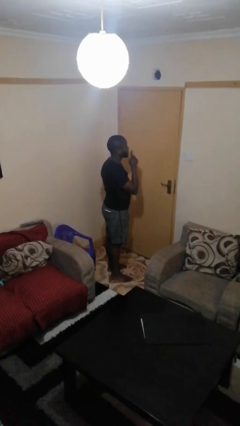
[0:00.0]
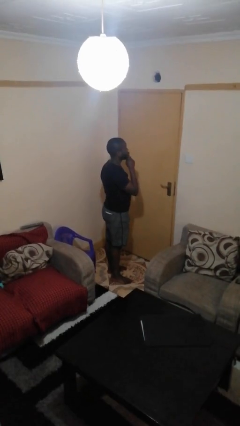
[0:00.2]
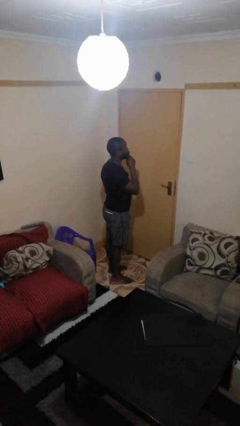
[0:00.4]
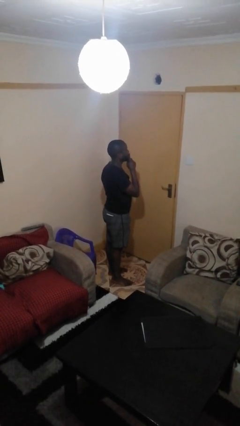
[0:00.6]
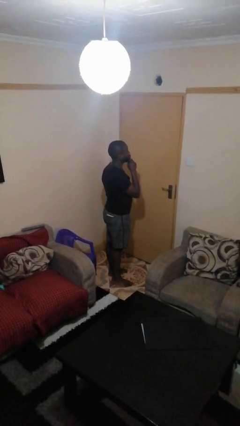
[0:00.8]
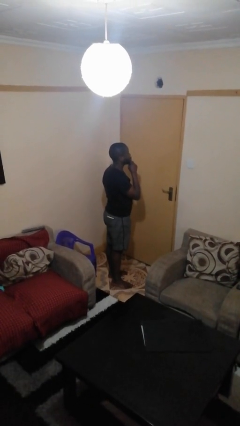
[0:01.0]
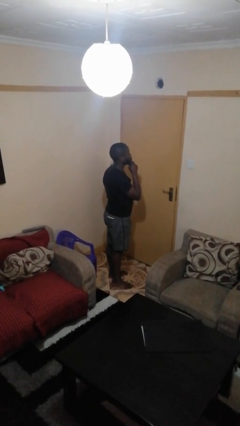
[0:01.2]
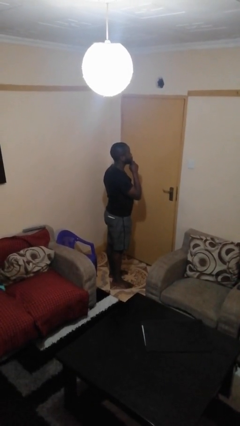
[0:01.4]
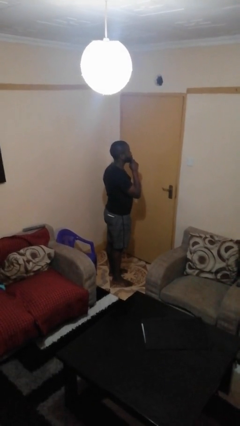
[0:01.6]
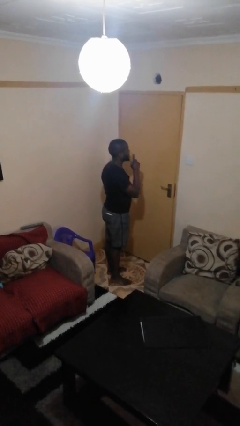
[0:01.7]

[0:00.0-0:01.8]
person gestures be quiet

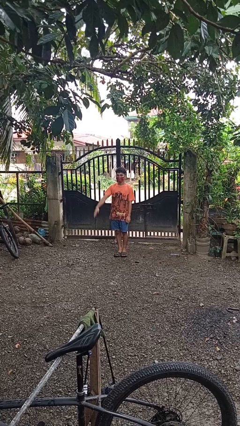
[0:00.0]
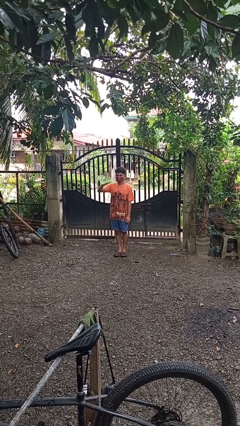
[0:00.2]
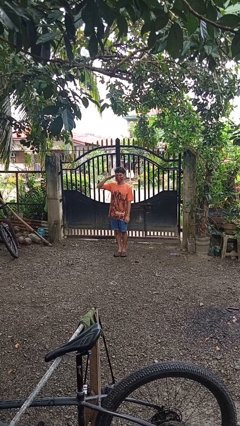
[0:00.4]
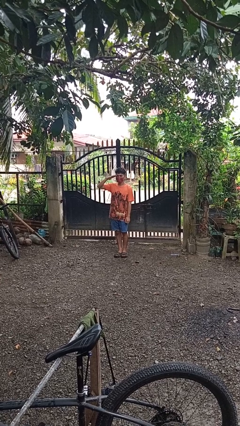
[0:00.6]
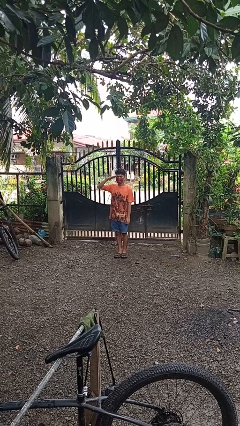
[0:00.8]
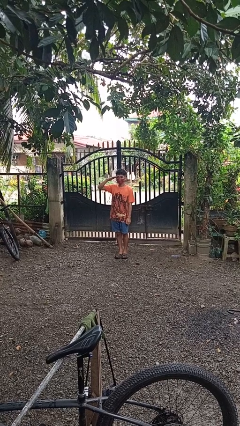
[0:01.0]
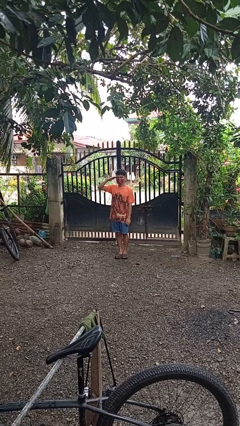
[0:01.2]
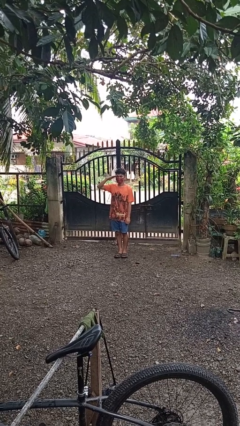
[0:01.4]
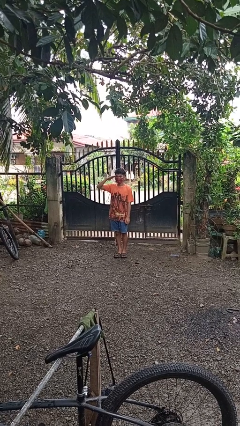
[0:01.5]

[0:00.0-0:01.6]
person salutes

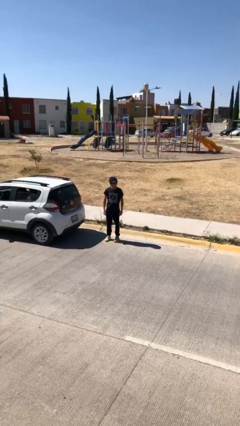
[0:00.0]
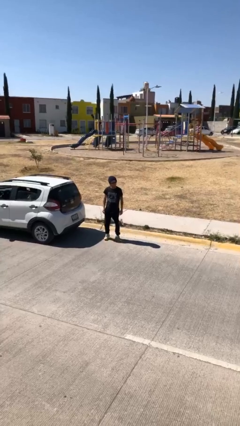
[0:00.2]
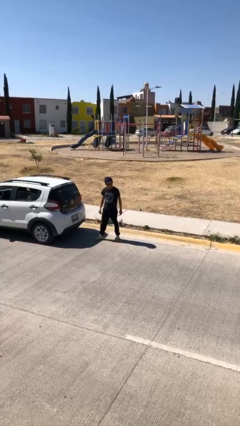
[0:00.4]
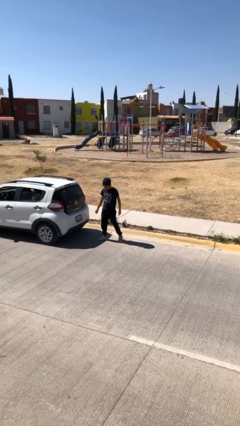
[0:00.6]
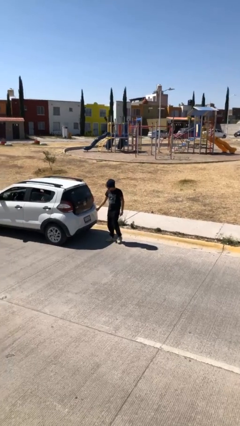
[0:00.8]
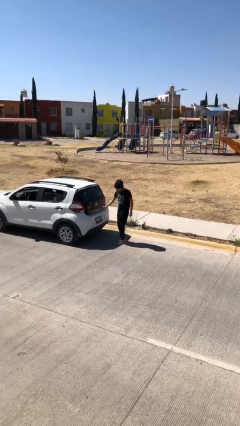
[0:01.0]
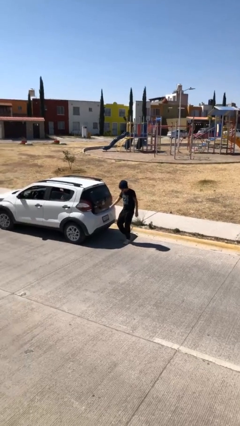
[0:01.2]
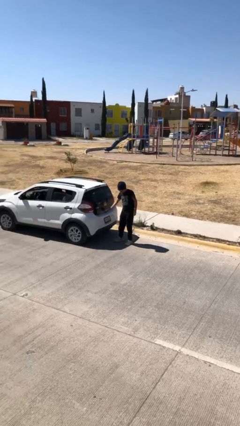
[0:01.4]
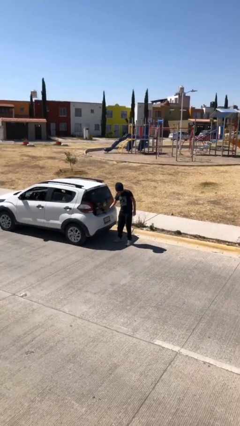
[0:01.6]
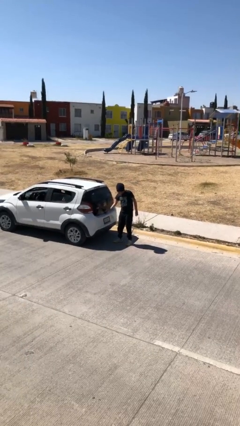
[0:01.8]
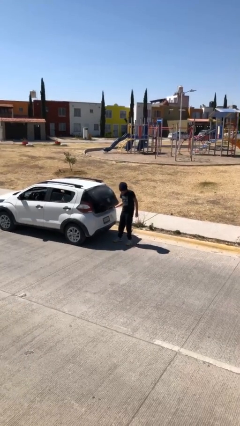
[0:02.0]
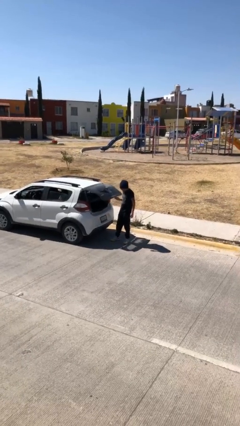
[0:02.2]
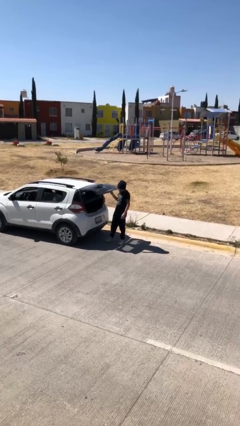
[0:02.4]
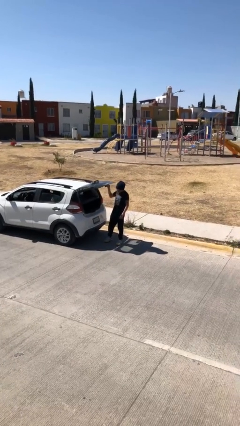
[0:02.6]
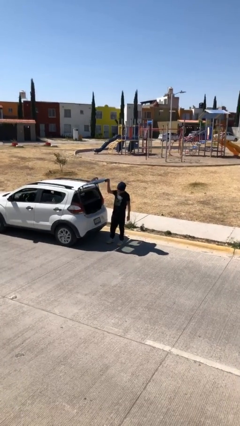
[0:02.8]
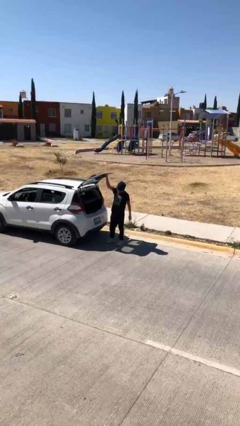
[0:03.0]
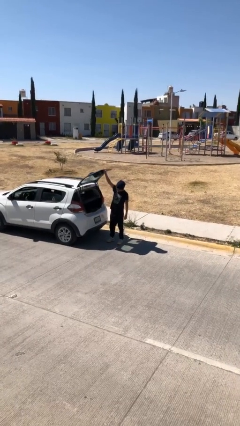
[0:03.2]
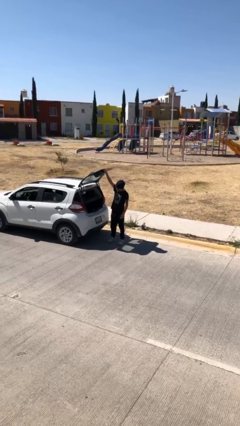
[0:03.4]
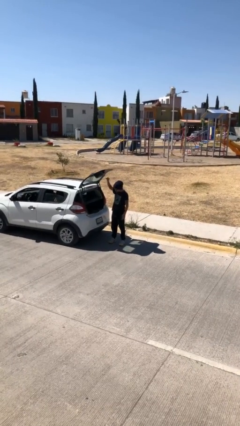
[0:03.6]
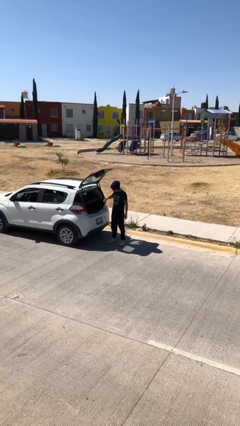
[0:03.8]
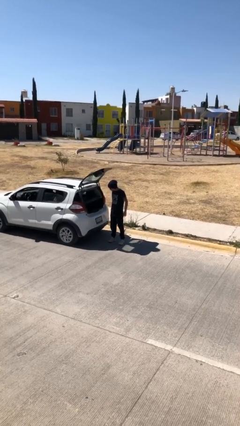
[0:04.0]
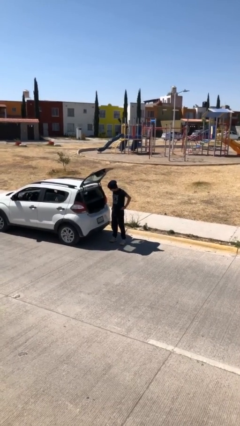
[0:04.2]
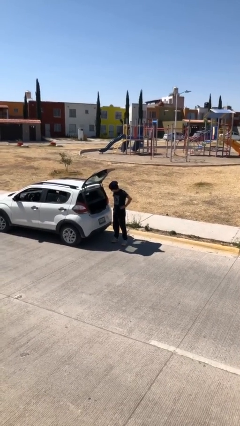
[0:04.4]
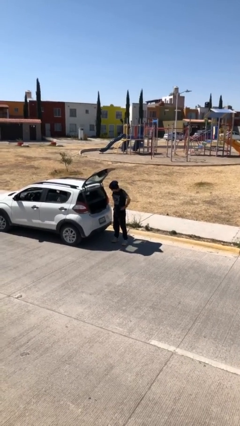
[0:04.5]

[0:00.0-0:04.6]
person opens car trunk

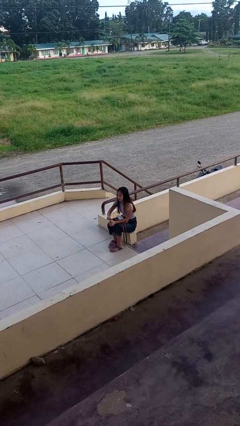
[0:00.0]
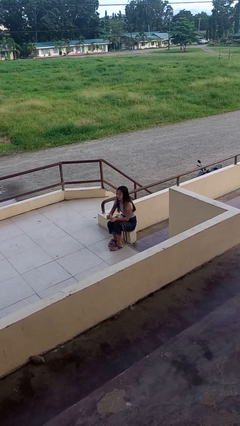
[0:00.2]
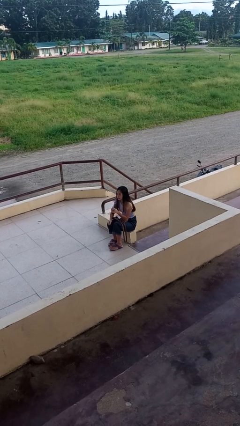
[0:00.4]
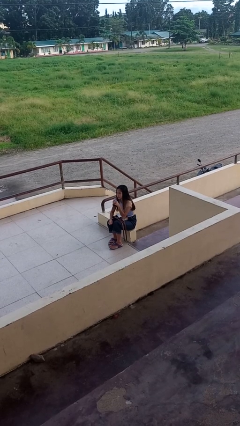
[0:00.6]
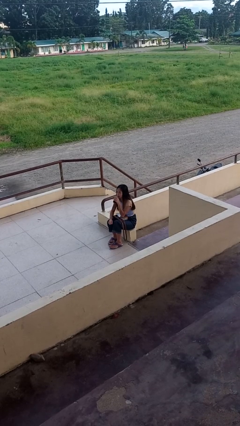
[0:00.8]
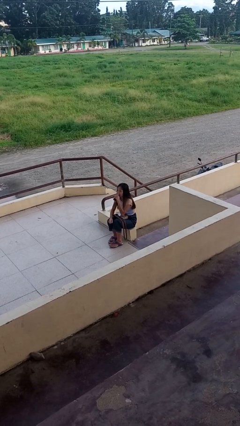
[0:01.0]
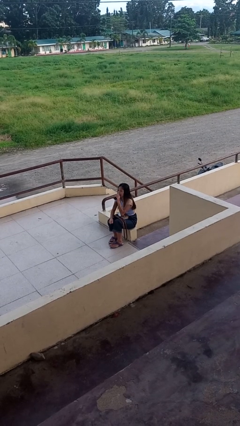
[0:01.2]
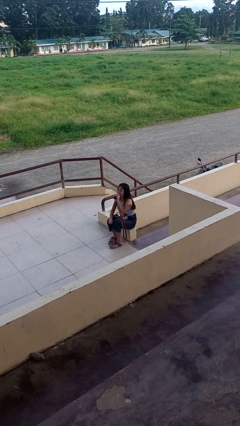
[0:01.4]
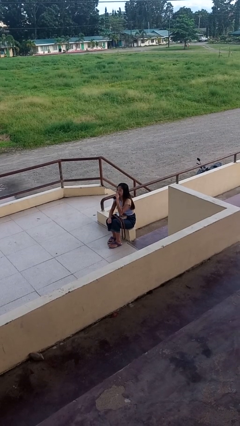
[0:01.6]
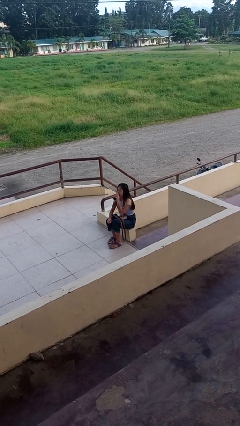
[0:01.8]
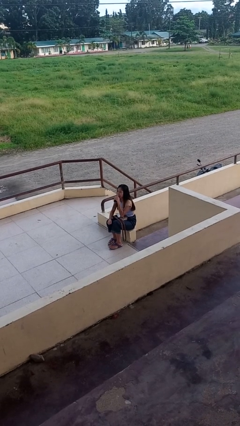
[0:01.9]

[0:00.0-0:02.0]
person drinks from beverage can

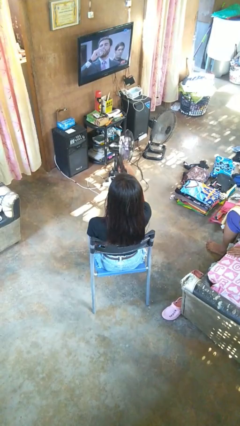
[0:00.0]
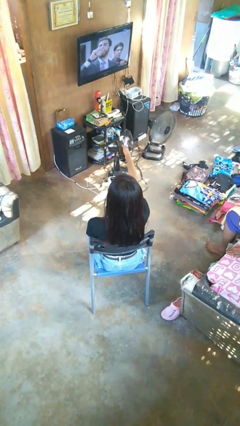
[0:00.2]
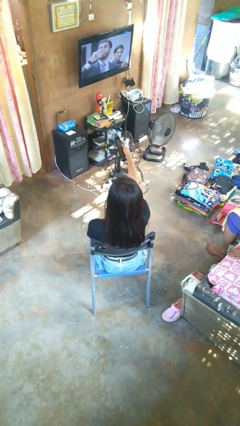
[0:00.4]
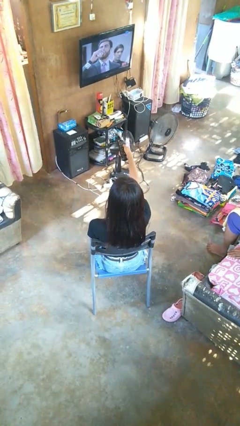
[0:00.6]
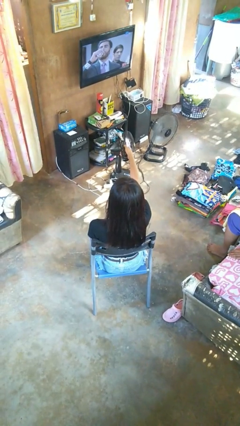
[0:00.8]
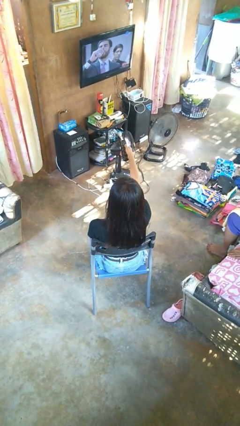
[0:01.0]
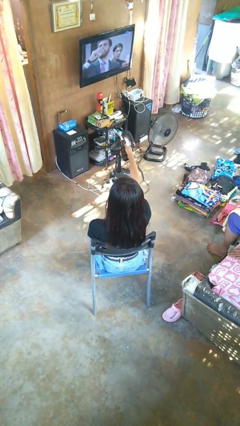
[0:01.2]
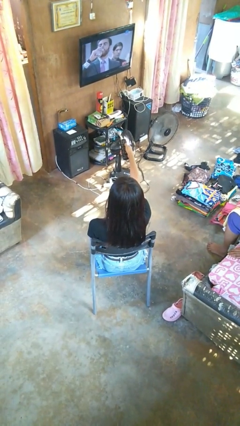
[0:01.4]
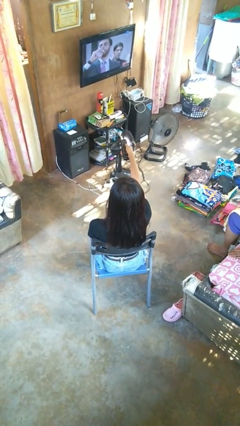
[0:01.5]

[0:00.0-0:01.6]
person uses television remote

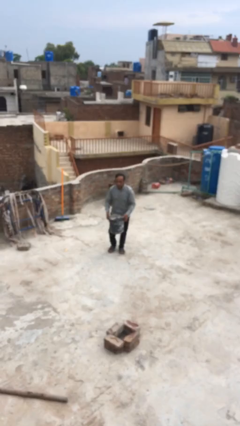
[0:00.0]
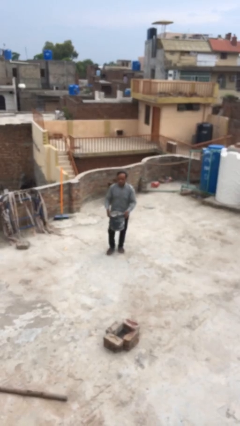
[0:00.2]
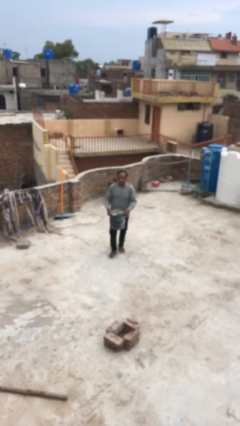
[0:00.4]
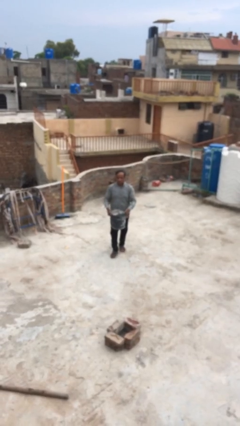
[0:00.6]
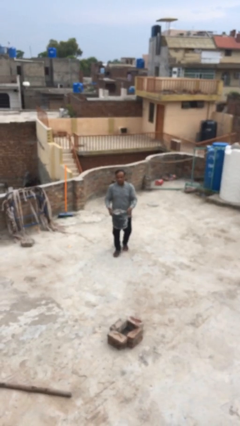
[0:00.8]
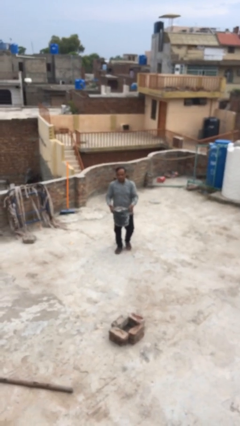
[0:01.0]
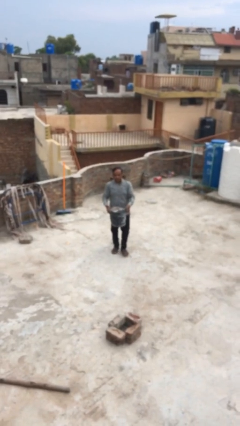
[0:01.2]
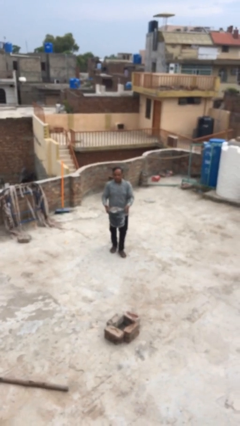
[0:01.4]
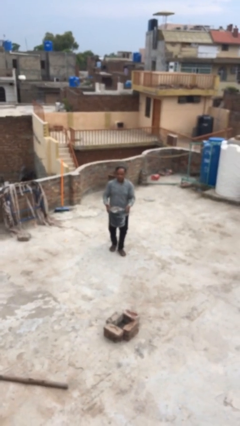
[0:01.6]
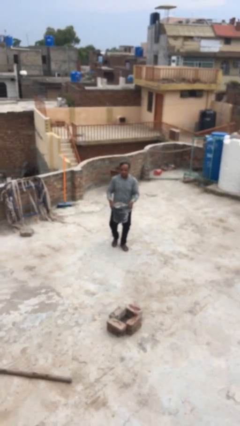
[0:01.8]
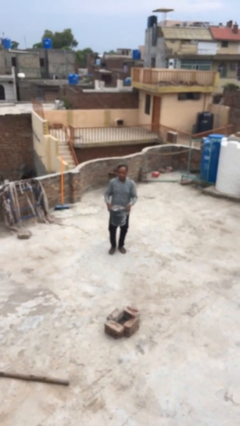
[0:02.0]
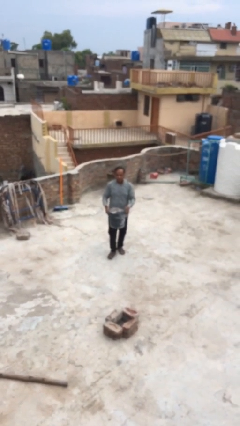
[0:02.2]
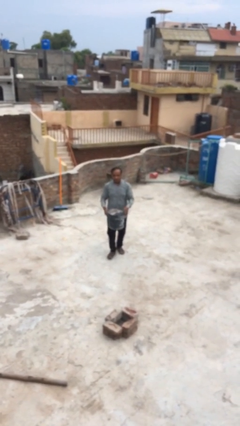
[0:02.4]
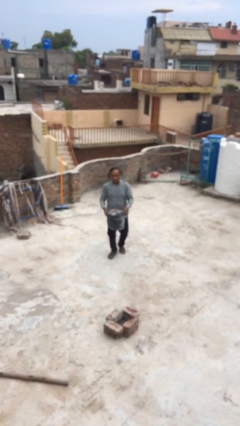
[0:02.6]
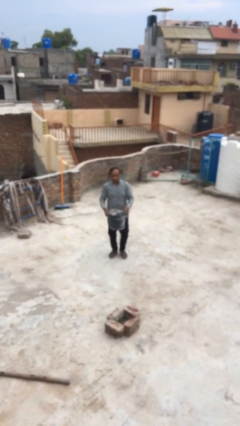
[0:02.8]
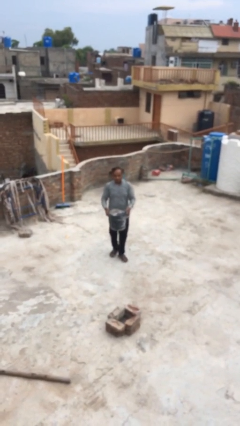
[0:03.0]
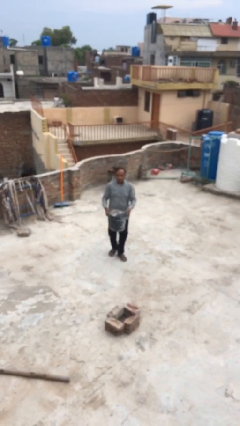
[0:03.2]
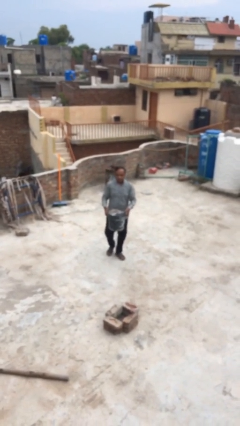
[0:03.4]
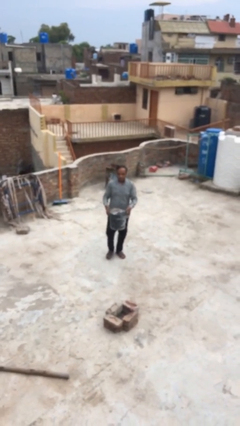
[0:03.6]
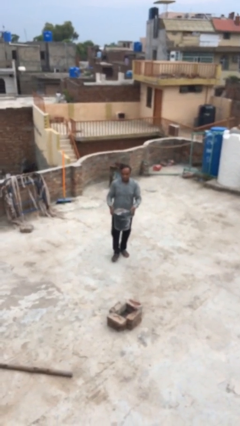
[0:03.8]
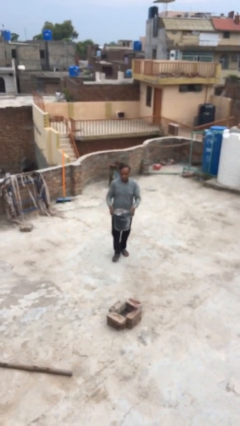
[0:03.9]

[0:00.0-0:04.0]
person carries heavy object

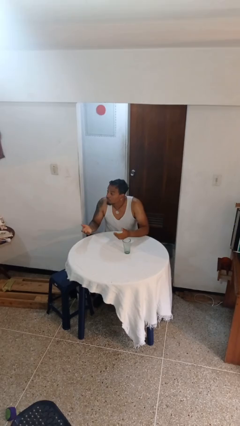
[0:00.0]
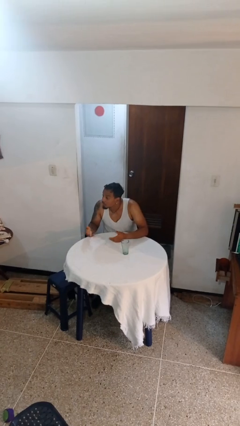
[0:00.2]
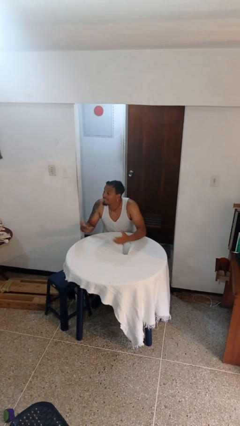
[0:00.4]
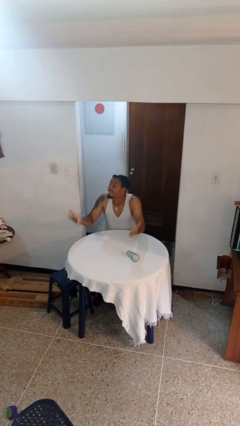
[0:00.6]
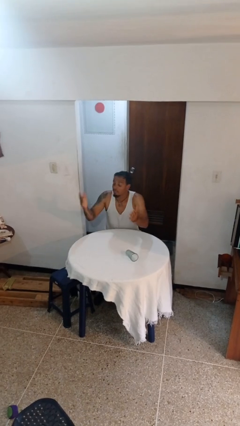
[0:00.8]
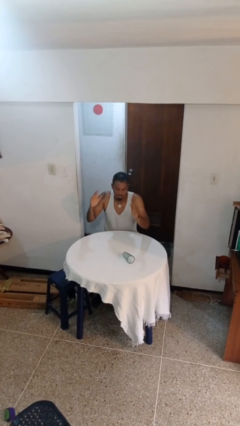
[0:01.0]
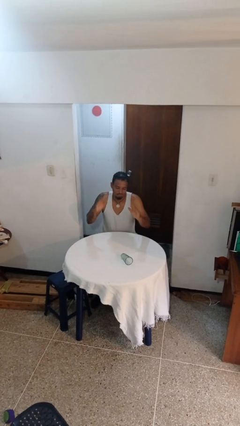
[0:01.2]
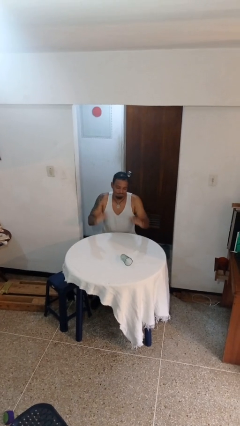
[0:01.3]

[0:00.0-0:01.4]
person knocks over glass

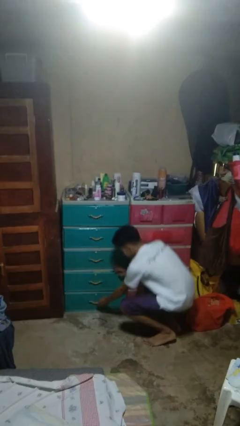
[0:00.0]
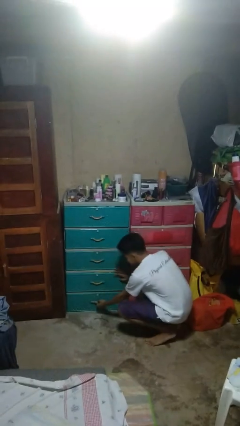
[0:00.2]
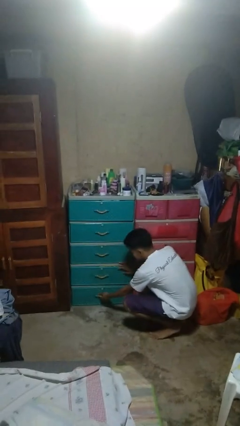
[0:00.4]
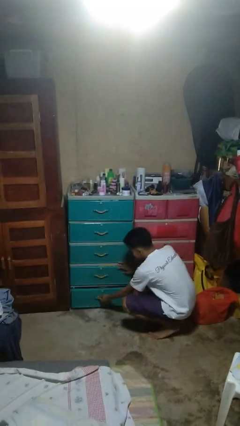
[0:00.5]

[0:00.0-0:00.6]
person opens dresser drawer
